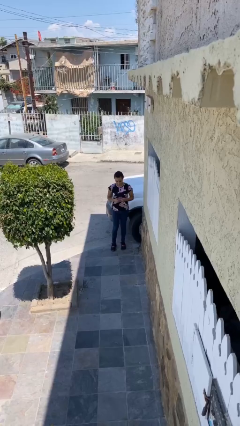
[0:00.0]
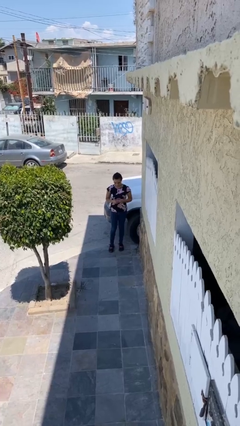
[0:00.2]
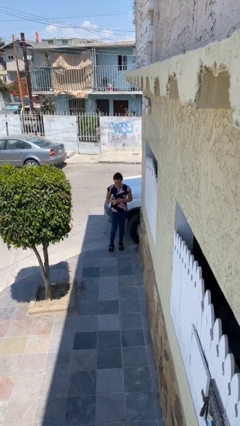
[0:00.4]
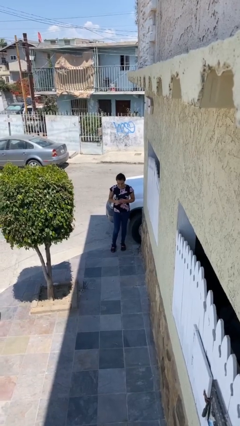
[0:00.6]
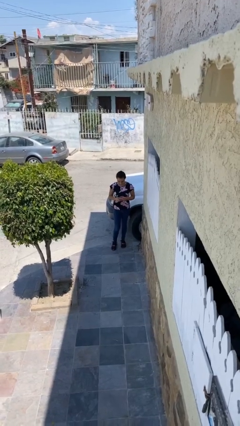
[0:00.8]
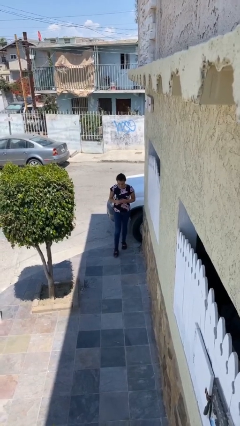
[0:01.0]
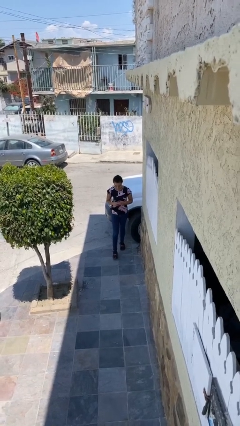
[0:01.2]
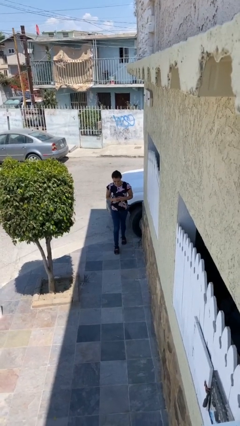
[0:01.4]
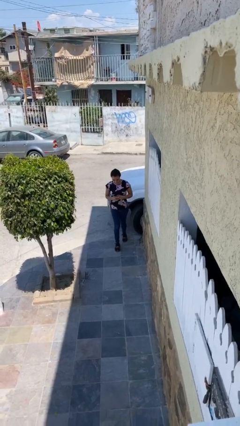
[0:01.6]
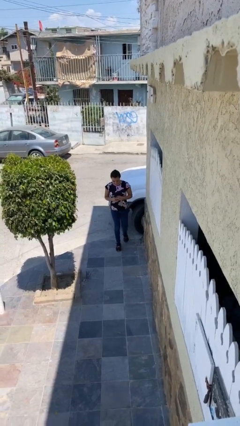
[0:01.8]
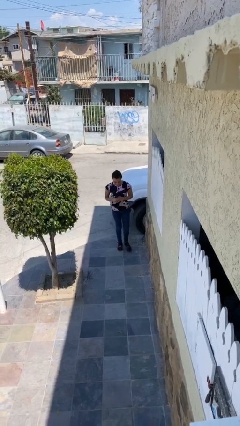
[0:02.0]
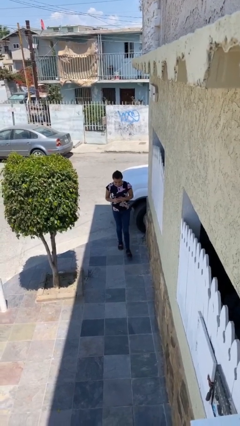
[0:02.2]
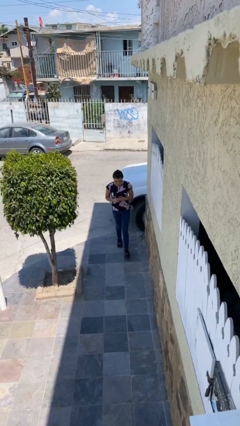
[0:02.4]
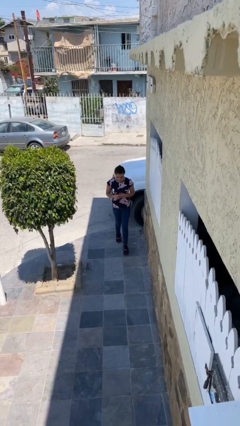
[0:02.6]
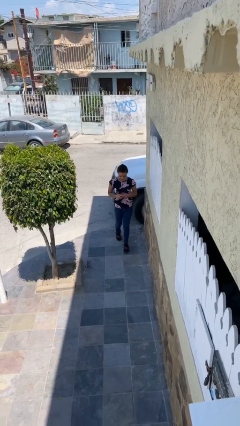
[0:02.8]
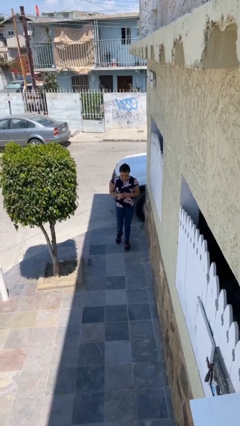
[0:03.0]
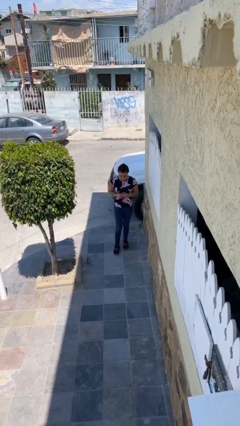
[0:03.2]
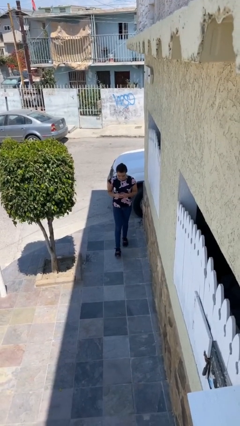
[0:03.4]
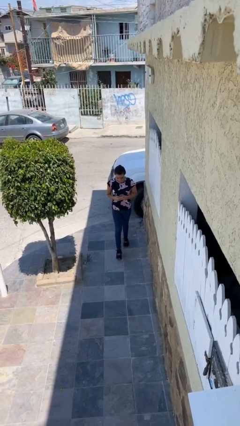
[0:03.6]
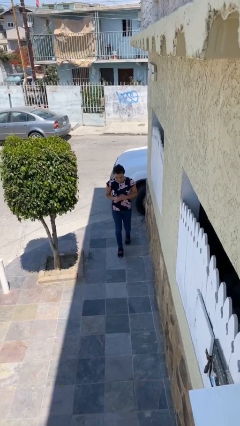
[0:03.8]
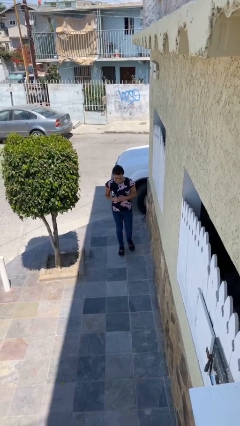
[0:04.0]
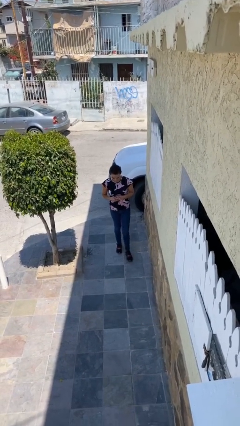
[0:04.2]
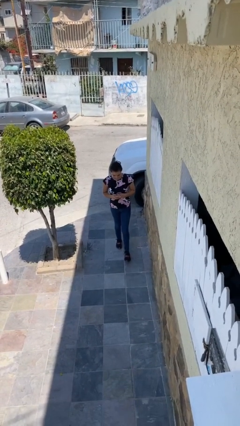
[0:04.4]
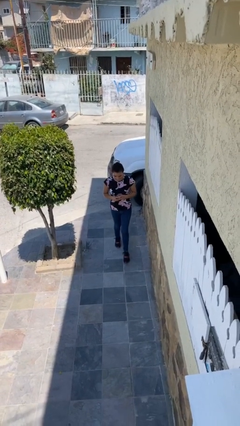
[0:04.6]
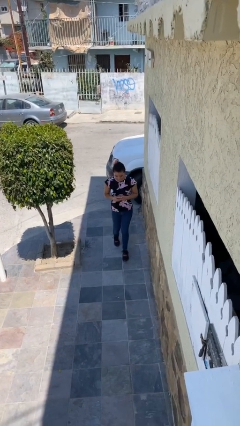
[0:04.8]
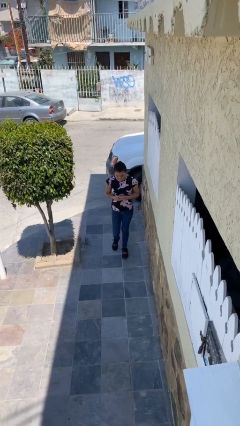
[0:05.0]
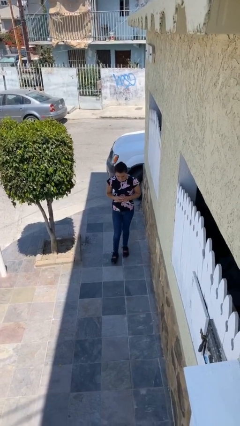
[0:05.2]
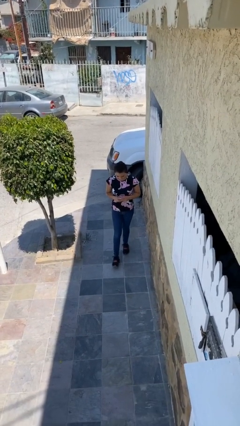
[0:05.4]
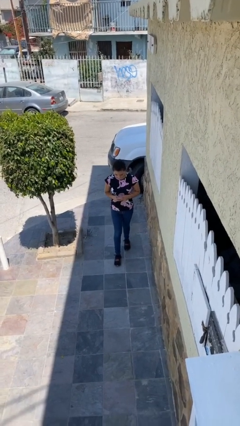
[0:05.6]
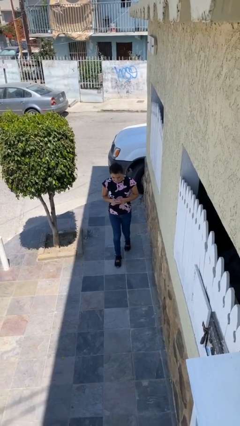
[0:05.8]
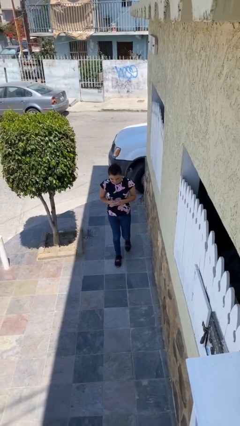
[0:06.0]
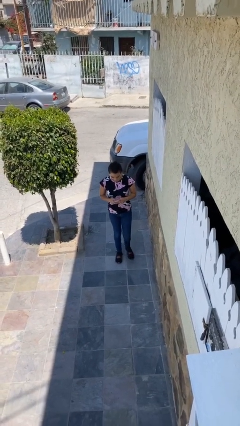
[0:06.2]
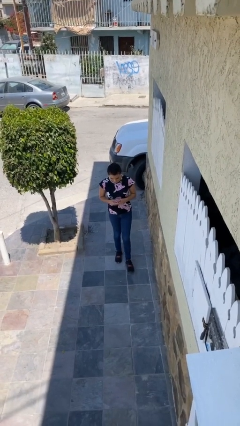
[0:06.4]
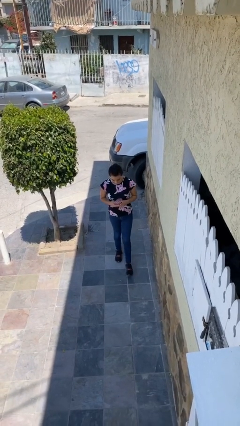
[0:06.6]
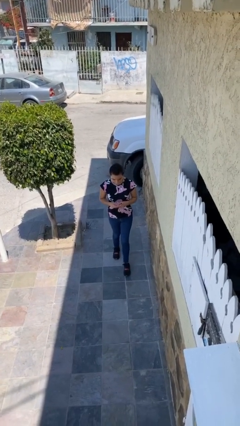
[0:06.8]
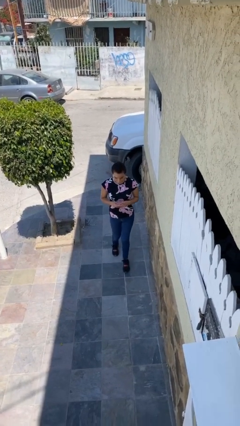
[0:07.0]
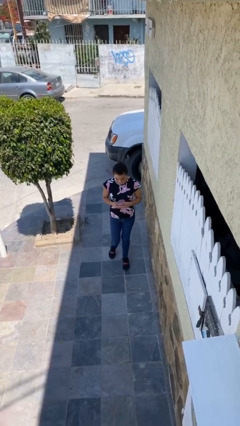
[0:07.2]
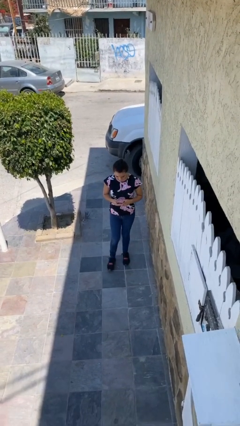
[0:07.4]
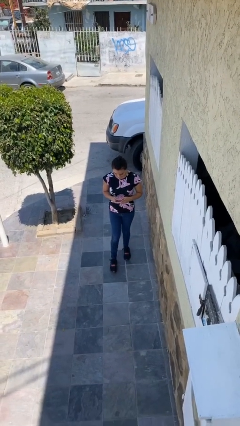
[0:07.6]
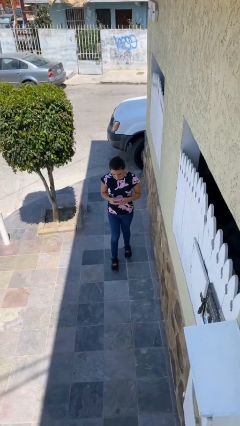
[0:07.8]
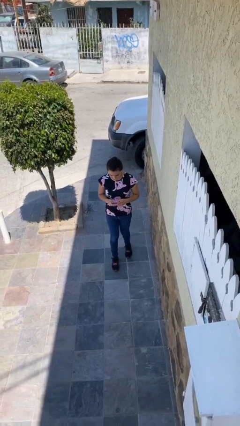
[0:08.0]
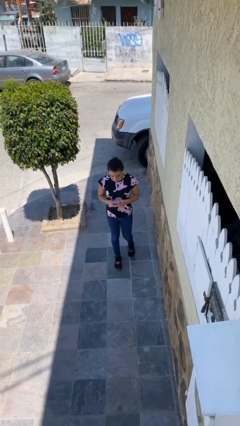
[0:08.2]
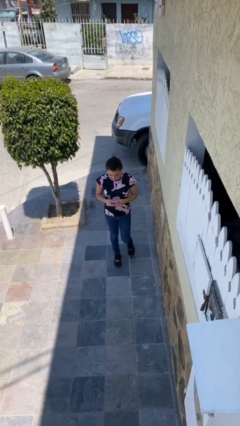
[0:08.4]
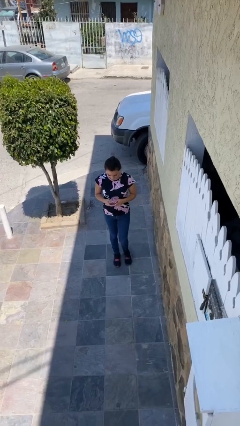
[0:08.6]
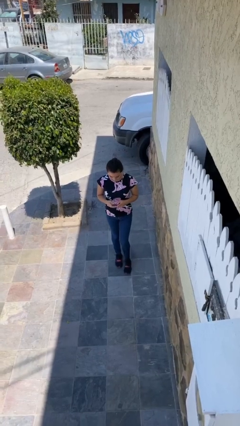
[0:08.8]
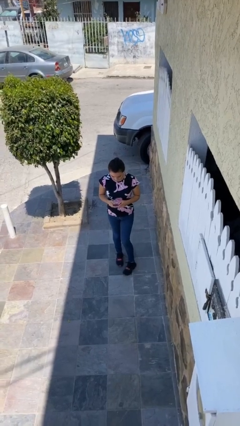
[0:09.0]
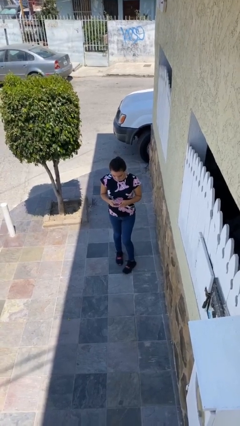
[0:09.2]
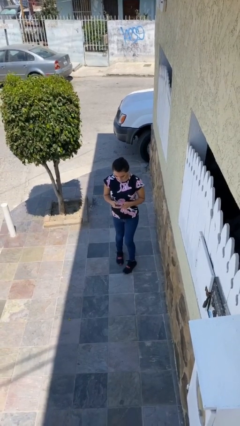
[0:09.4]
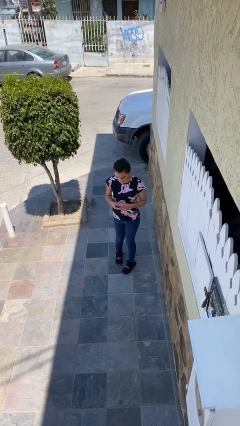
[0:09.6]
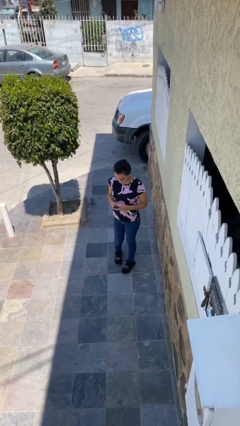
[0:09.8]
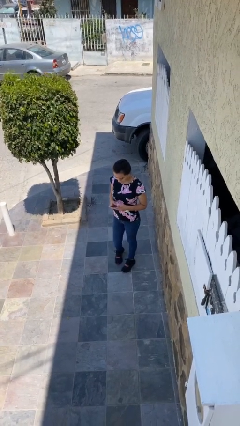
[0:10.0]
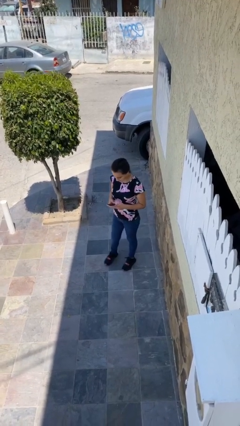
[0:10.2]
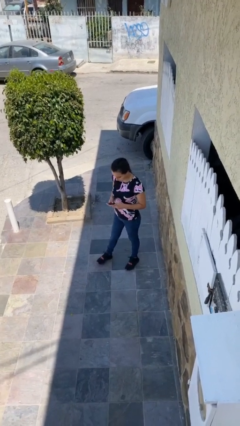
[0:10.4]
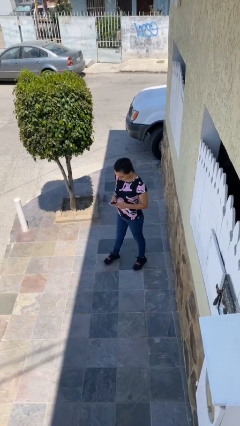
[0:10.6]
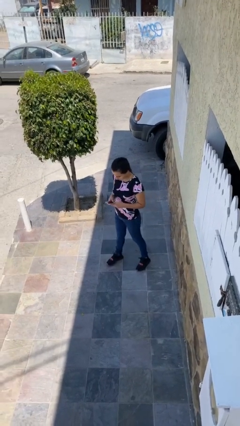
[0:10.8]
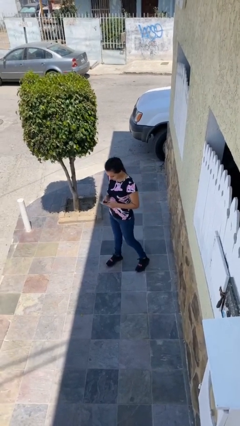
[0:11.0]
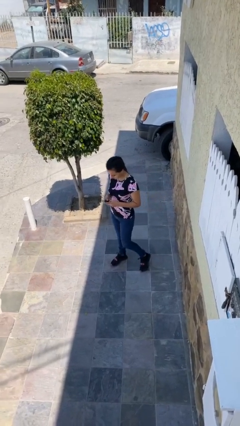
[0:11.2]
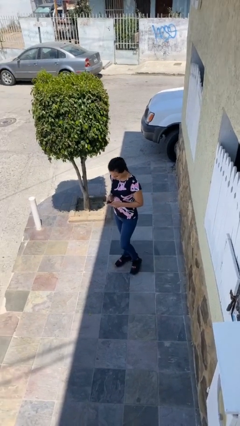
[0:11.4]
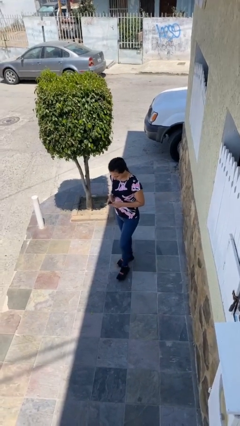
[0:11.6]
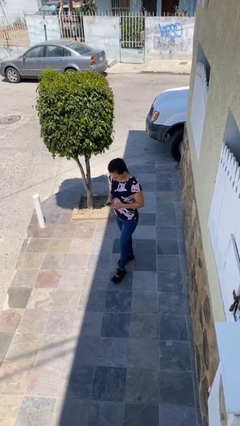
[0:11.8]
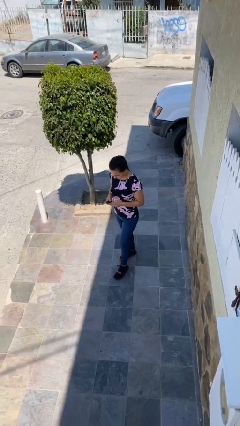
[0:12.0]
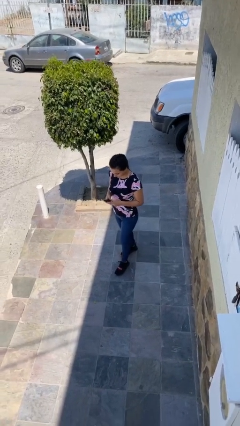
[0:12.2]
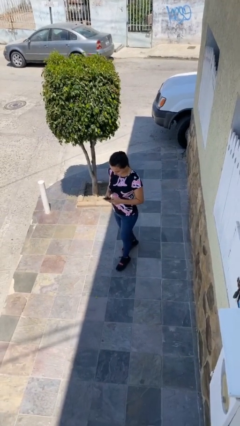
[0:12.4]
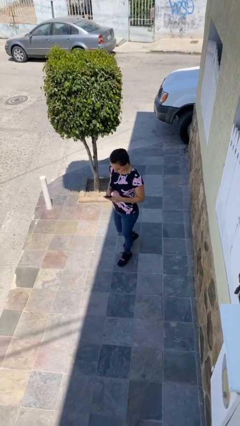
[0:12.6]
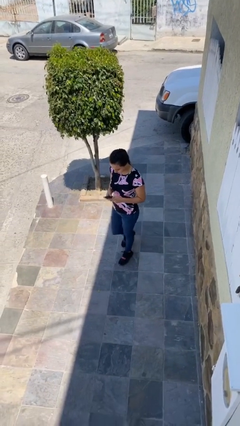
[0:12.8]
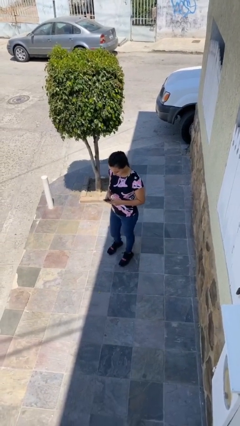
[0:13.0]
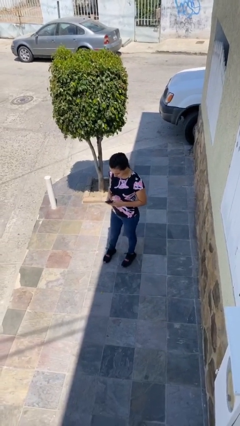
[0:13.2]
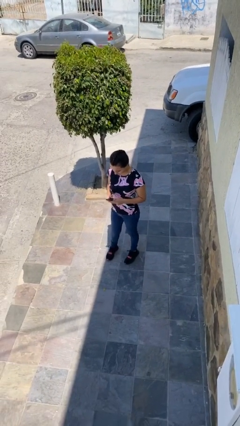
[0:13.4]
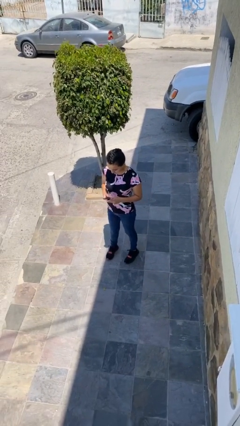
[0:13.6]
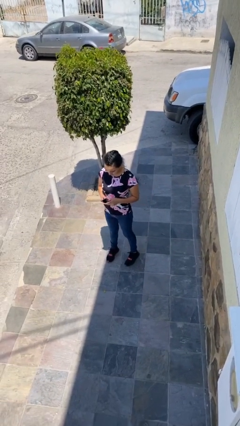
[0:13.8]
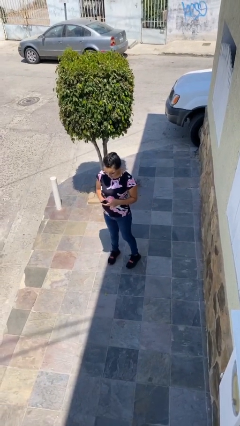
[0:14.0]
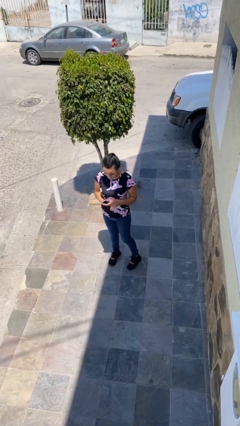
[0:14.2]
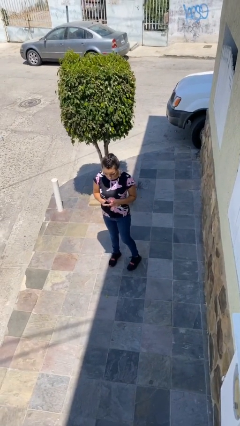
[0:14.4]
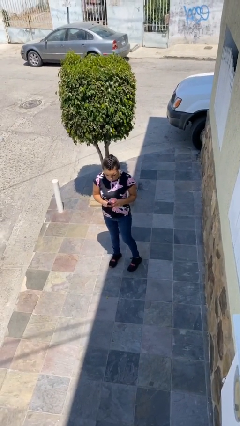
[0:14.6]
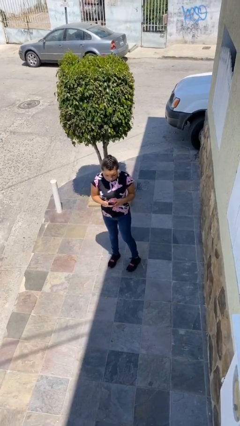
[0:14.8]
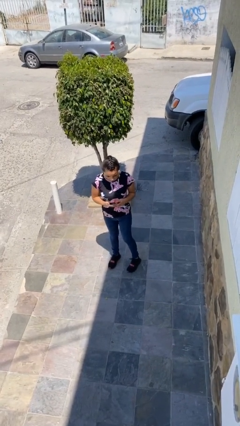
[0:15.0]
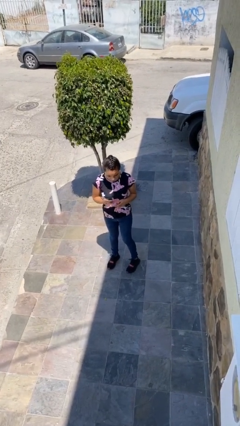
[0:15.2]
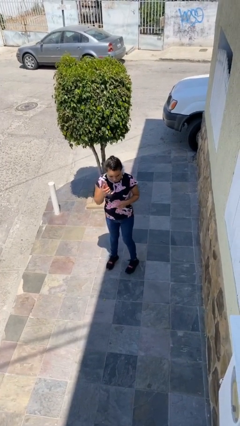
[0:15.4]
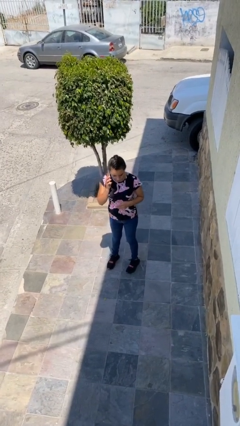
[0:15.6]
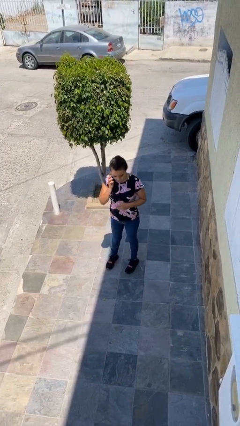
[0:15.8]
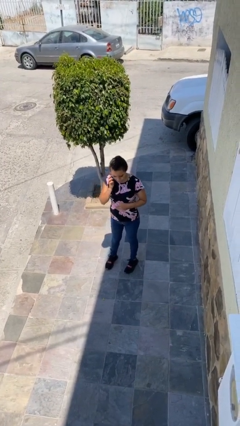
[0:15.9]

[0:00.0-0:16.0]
person texts on phone

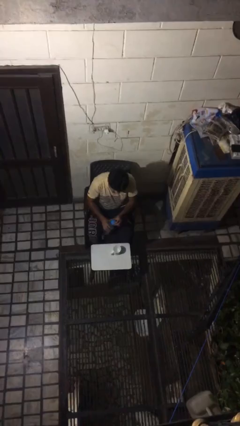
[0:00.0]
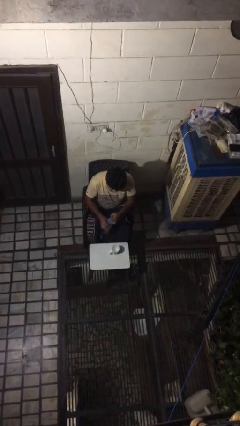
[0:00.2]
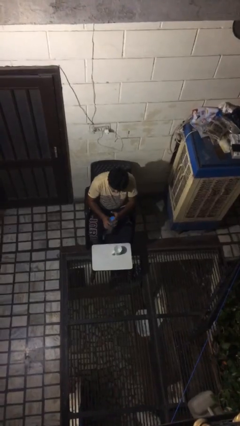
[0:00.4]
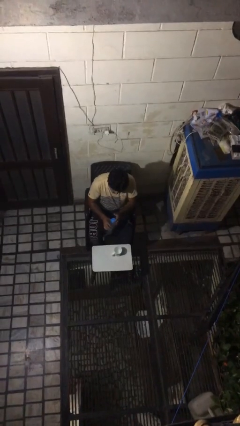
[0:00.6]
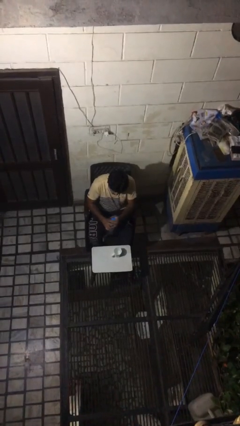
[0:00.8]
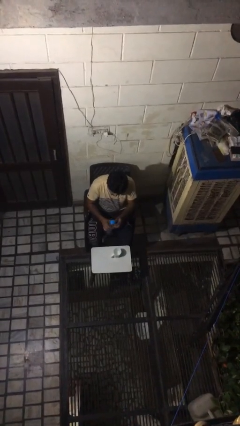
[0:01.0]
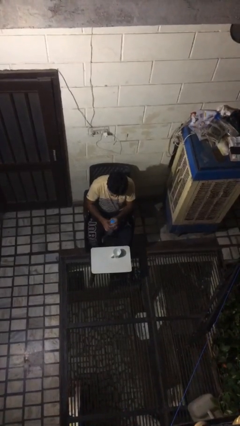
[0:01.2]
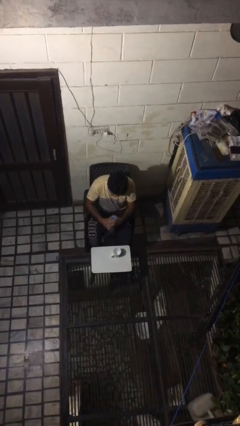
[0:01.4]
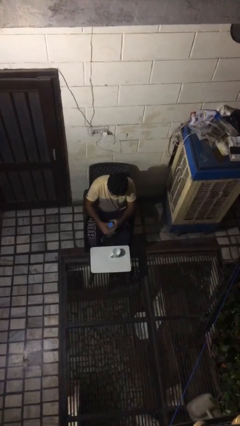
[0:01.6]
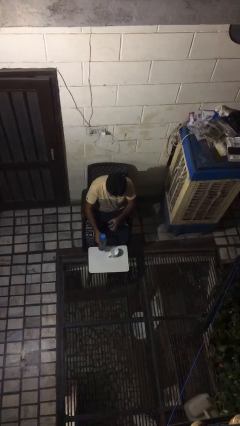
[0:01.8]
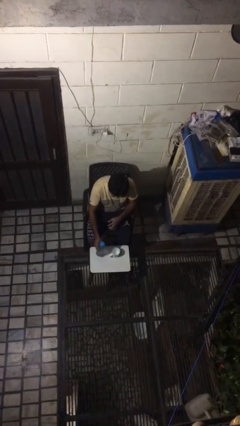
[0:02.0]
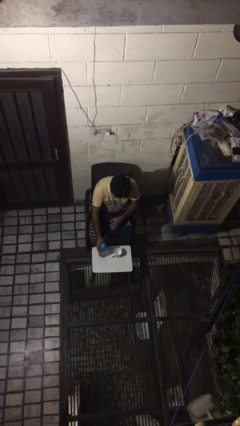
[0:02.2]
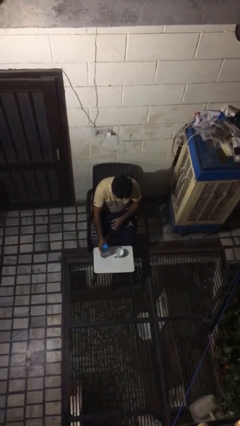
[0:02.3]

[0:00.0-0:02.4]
person screws lid to bottle
